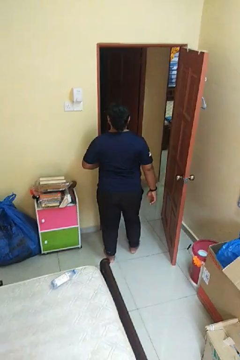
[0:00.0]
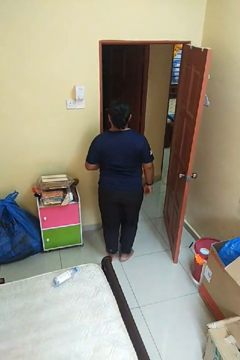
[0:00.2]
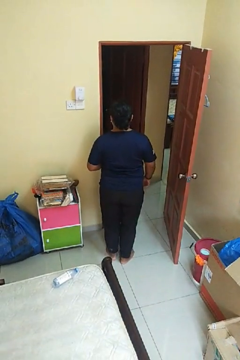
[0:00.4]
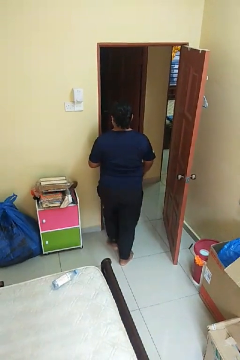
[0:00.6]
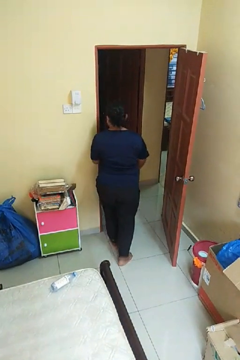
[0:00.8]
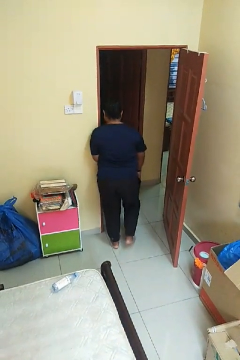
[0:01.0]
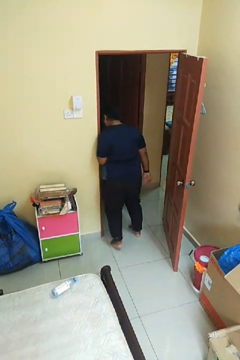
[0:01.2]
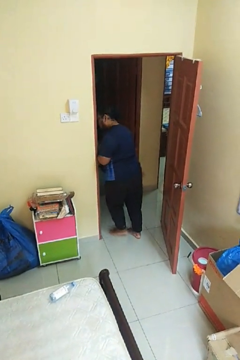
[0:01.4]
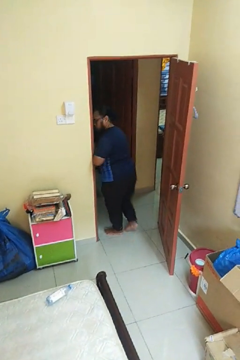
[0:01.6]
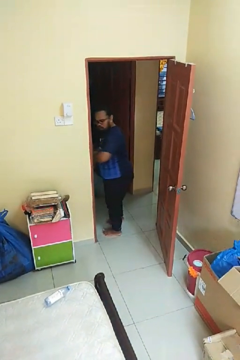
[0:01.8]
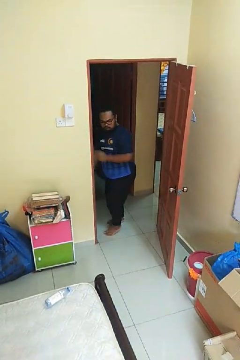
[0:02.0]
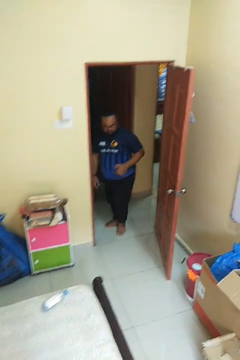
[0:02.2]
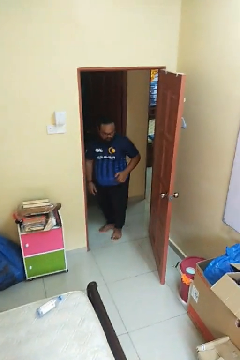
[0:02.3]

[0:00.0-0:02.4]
person bumps into wall

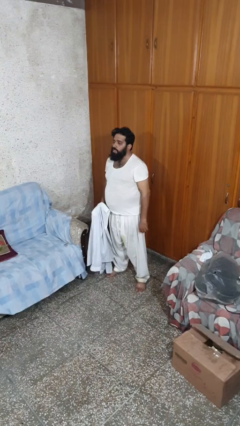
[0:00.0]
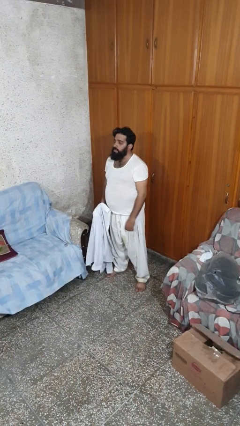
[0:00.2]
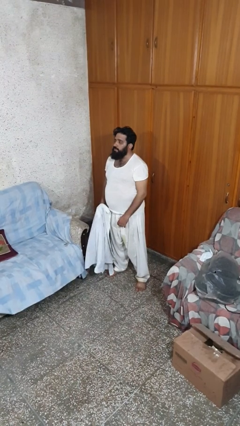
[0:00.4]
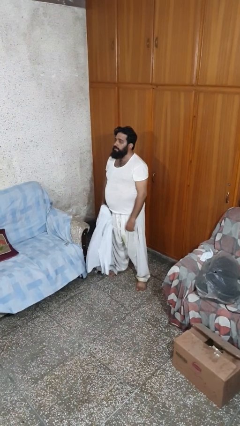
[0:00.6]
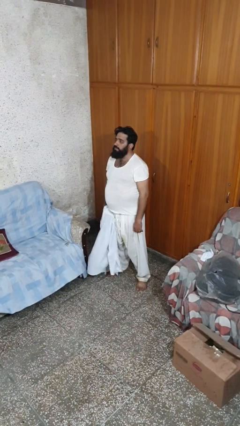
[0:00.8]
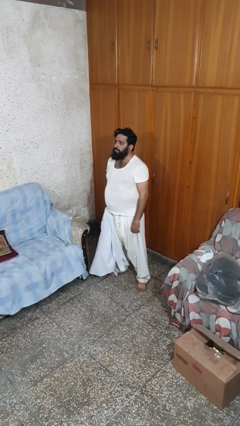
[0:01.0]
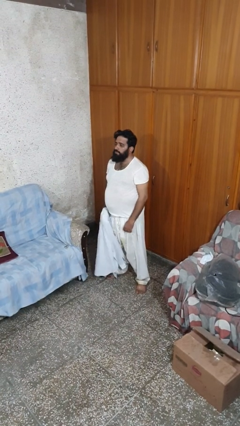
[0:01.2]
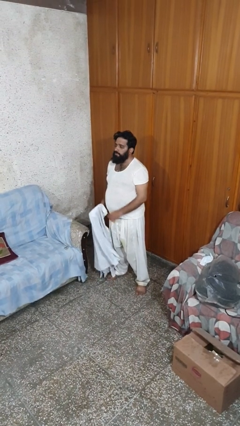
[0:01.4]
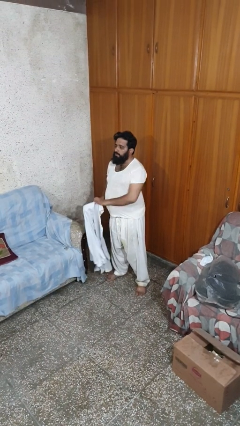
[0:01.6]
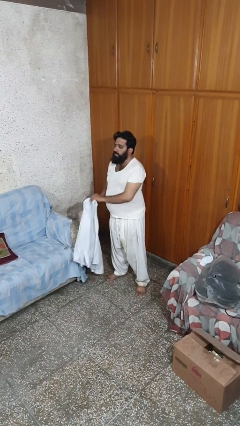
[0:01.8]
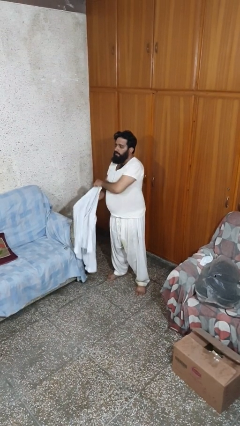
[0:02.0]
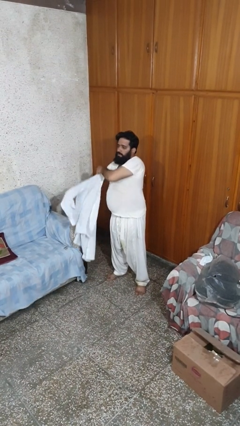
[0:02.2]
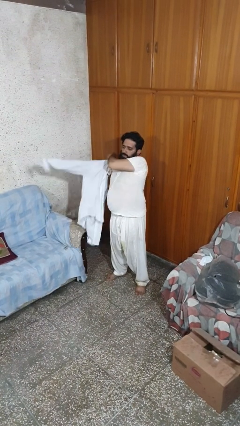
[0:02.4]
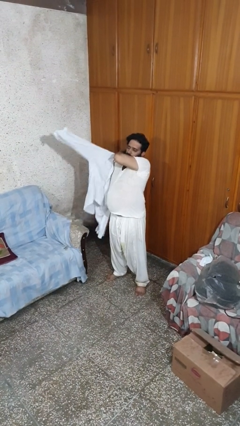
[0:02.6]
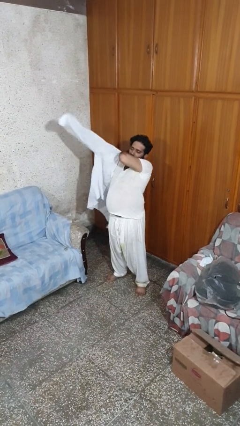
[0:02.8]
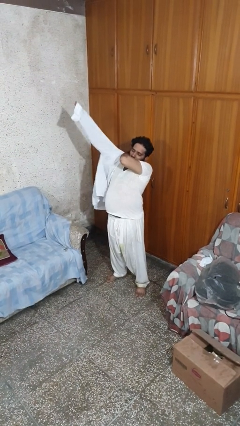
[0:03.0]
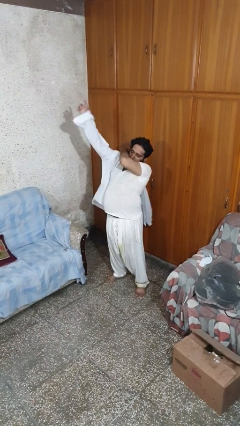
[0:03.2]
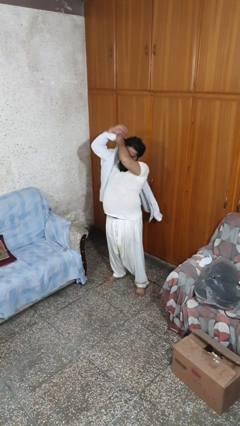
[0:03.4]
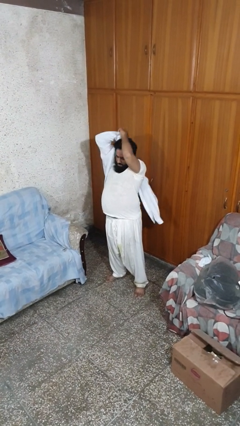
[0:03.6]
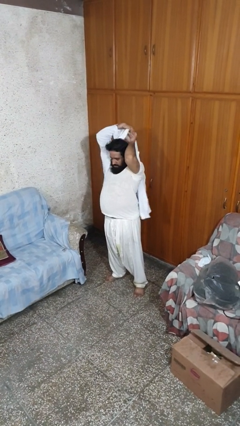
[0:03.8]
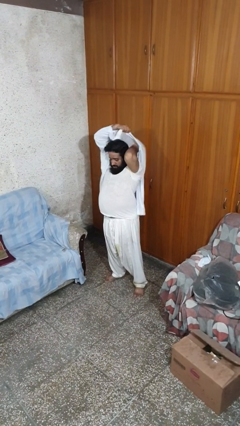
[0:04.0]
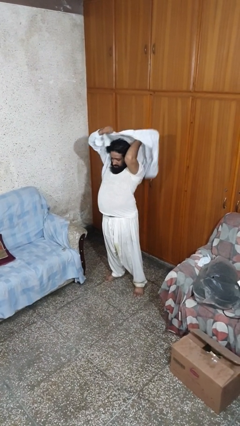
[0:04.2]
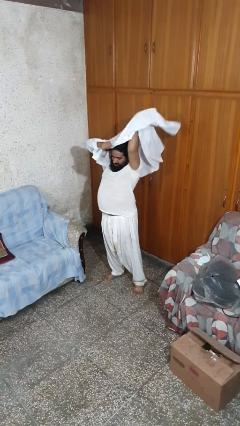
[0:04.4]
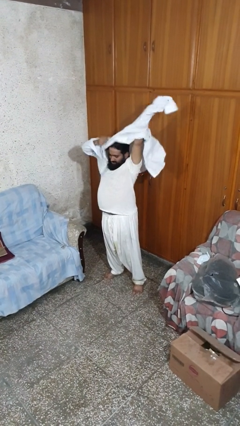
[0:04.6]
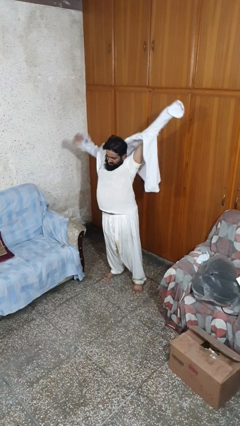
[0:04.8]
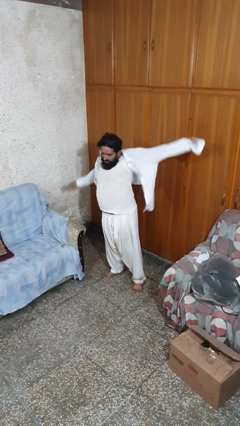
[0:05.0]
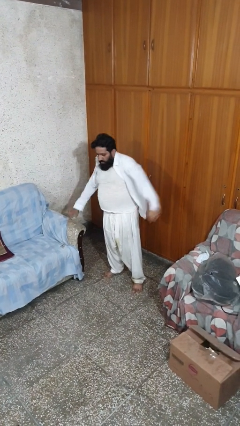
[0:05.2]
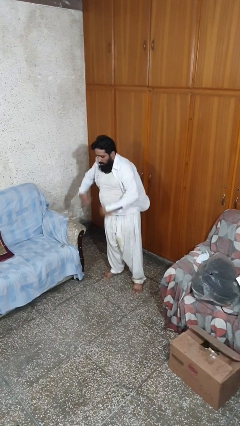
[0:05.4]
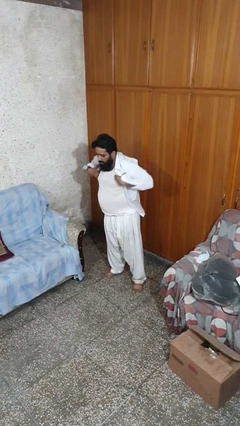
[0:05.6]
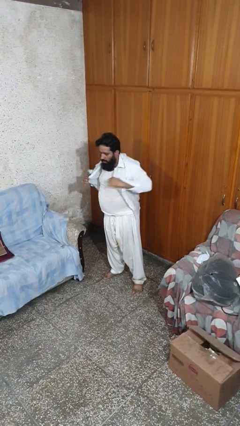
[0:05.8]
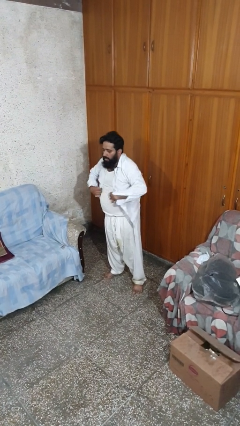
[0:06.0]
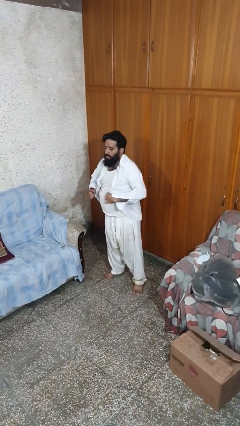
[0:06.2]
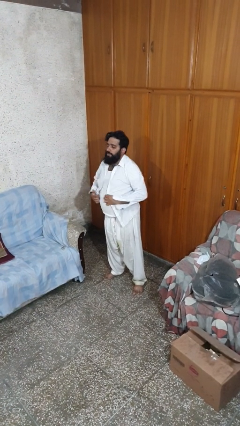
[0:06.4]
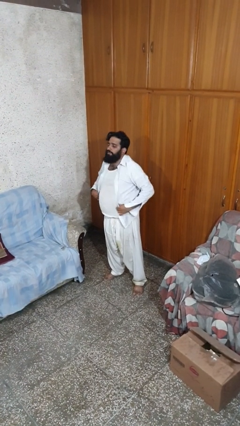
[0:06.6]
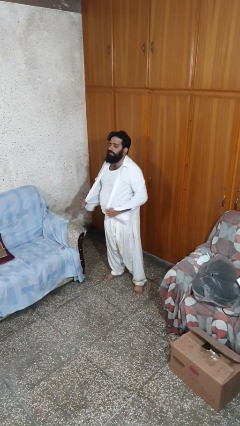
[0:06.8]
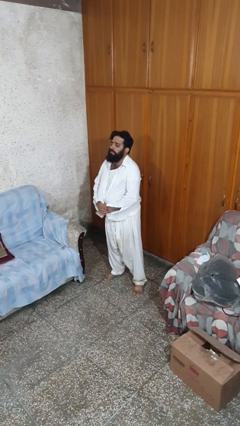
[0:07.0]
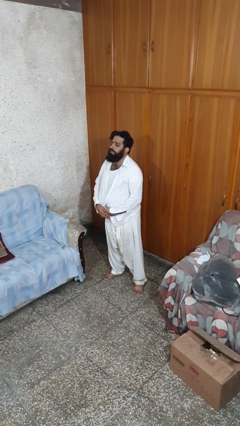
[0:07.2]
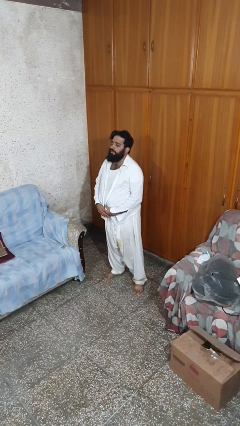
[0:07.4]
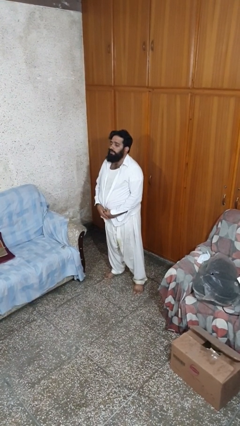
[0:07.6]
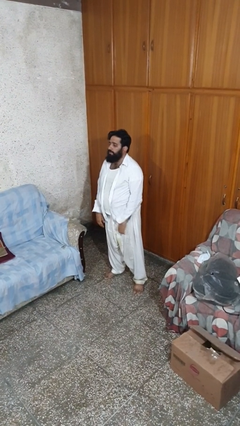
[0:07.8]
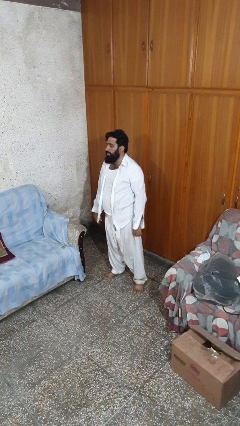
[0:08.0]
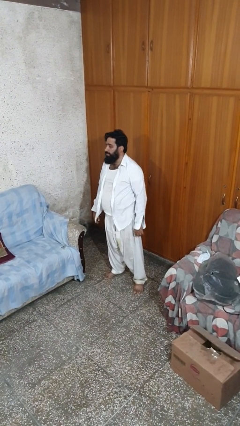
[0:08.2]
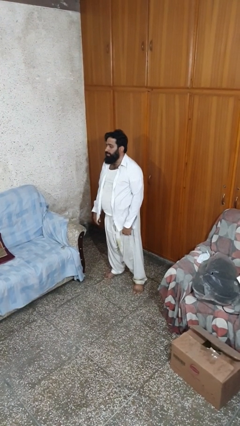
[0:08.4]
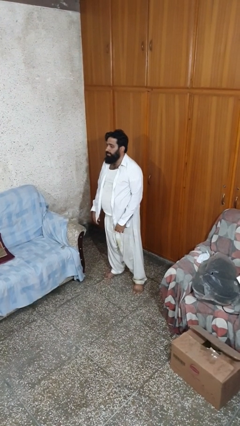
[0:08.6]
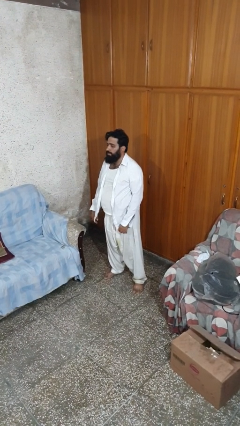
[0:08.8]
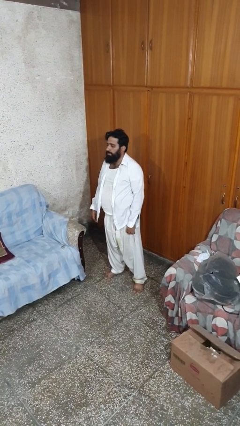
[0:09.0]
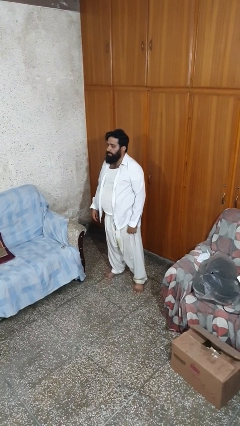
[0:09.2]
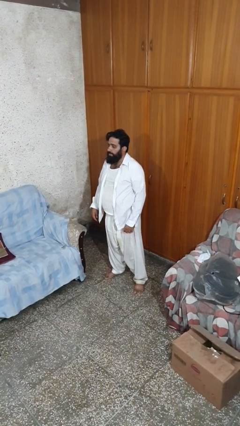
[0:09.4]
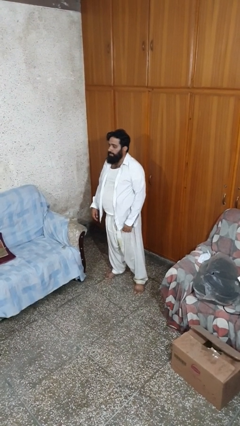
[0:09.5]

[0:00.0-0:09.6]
person puts on shirt

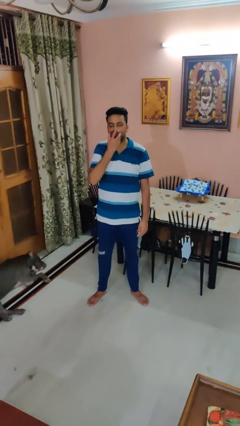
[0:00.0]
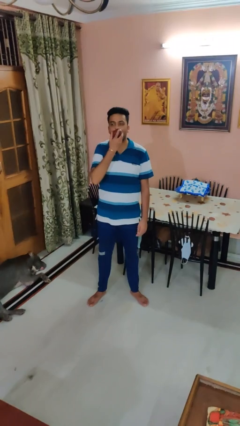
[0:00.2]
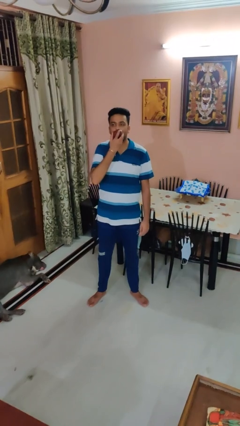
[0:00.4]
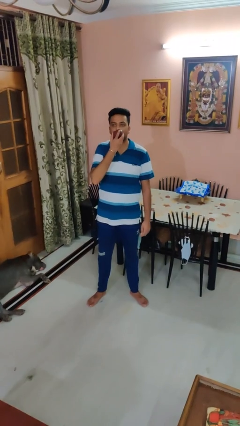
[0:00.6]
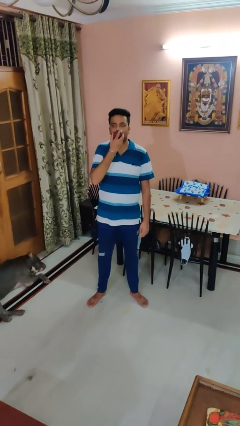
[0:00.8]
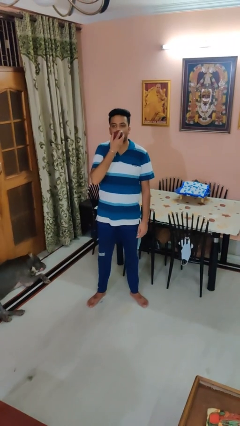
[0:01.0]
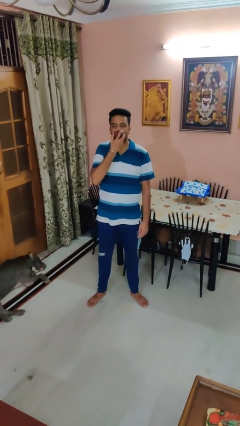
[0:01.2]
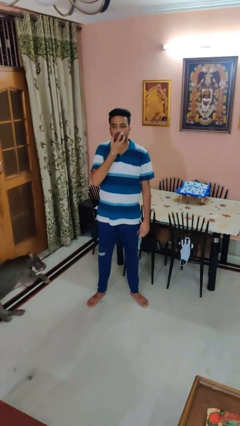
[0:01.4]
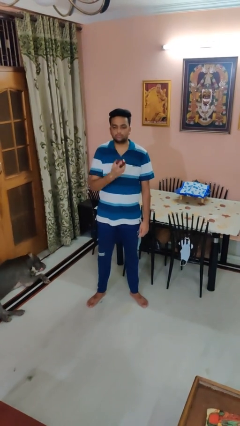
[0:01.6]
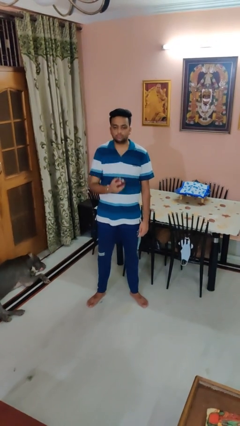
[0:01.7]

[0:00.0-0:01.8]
person eats apple

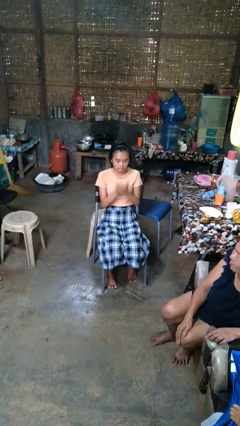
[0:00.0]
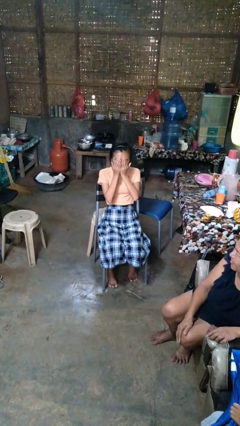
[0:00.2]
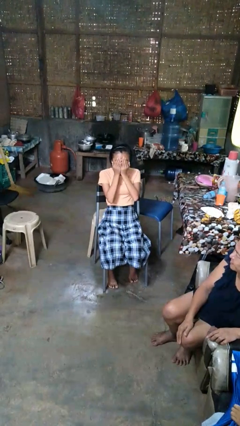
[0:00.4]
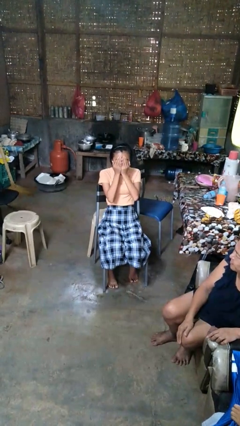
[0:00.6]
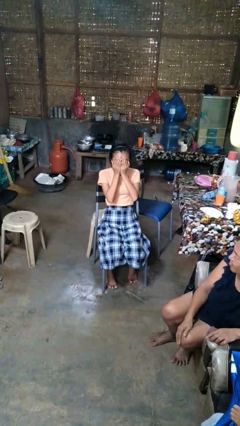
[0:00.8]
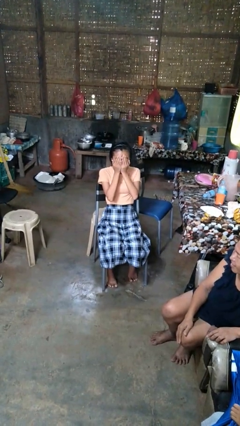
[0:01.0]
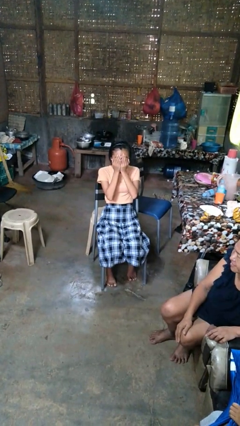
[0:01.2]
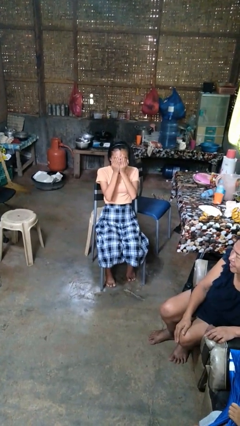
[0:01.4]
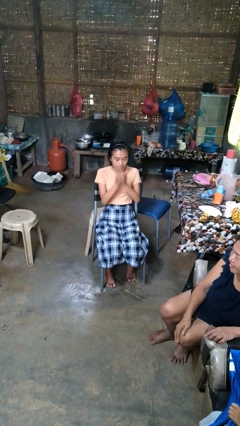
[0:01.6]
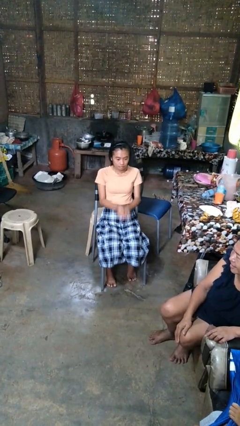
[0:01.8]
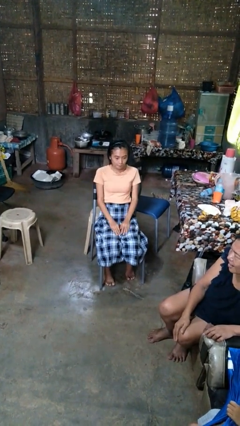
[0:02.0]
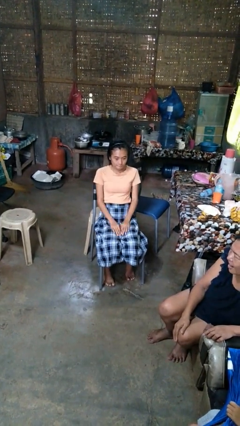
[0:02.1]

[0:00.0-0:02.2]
person covers face with hands

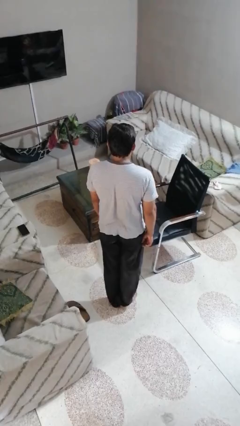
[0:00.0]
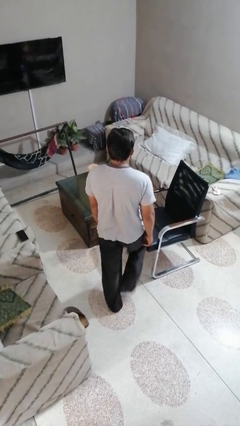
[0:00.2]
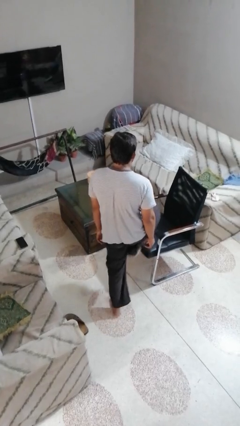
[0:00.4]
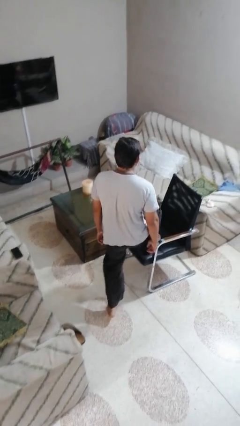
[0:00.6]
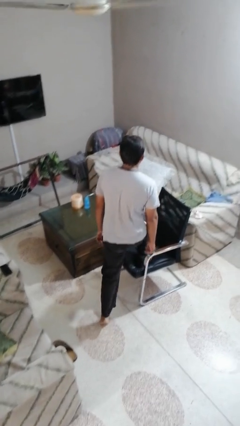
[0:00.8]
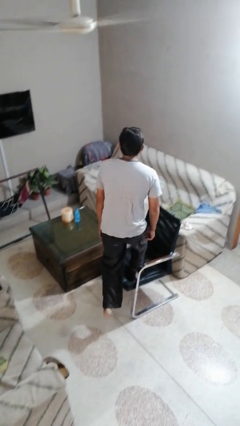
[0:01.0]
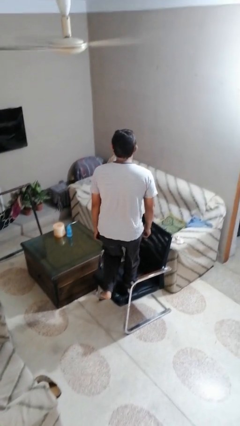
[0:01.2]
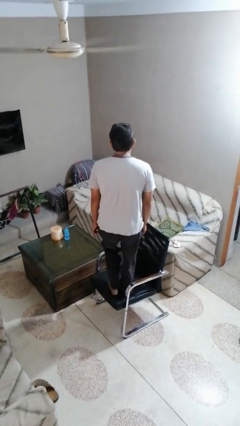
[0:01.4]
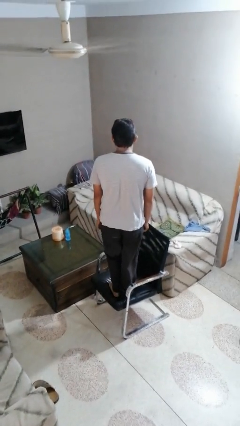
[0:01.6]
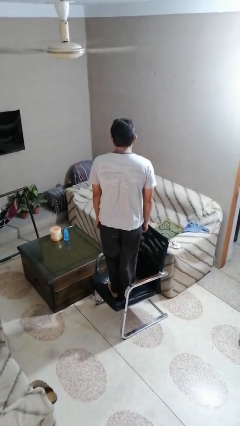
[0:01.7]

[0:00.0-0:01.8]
person climbs on chair

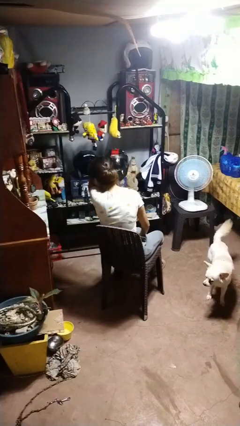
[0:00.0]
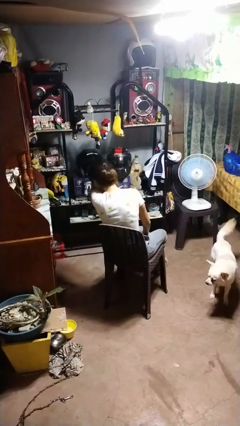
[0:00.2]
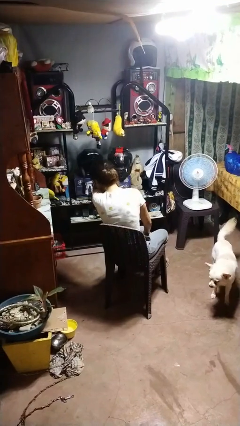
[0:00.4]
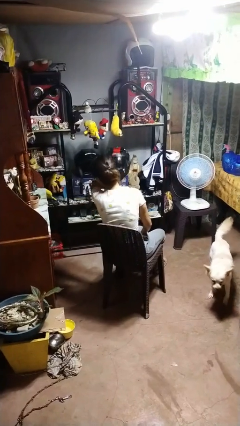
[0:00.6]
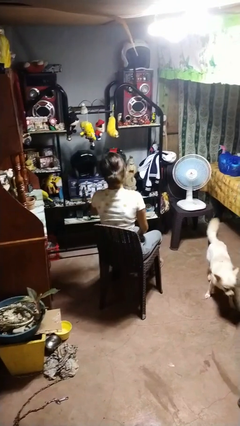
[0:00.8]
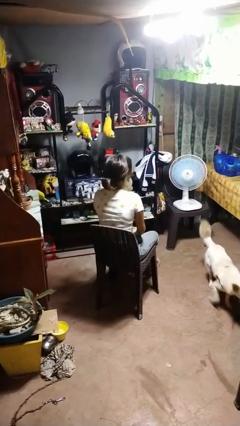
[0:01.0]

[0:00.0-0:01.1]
person sneezes into arm
